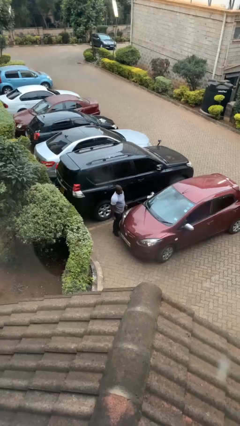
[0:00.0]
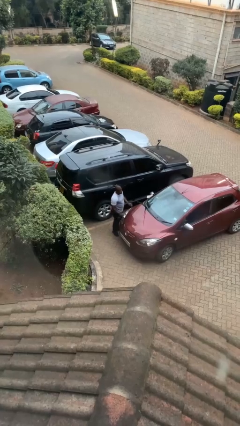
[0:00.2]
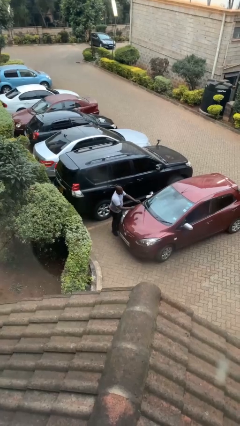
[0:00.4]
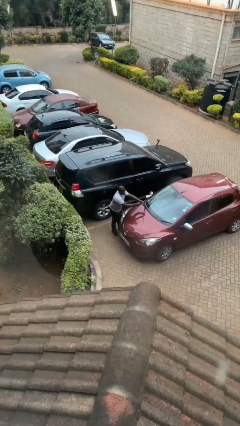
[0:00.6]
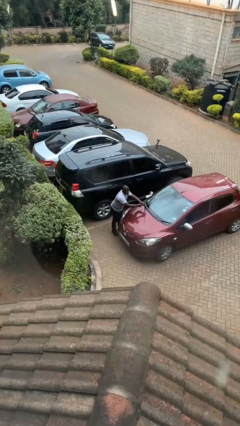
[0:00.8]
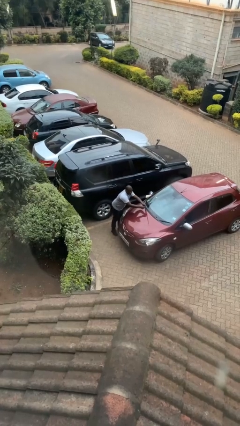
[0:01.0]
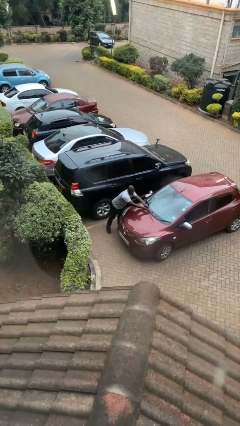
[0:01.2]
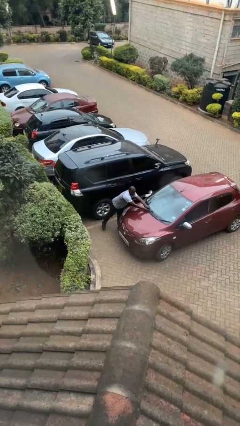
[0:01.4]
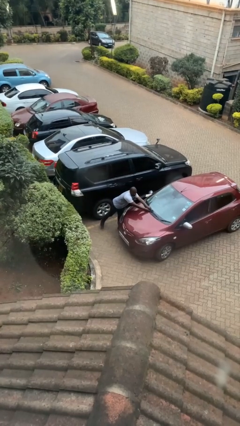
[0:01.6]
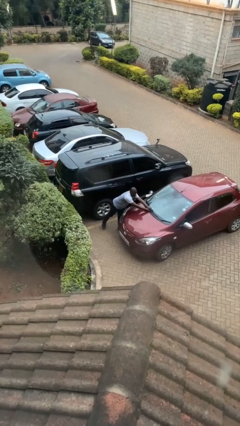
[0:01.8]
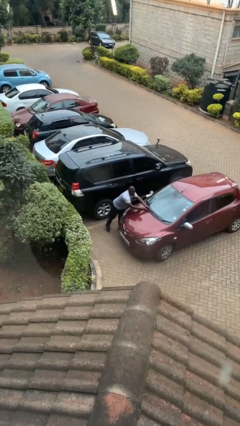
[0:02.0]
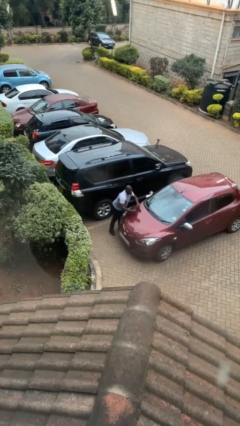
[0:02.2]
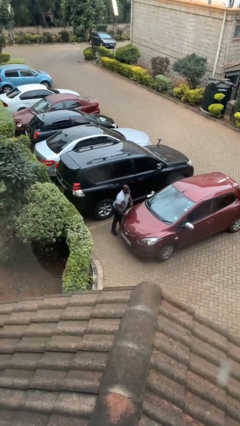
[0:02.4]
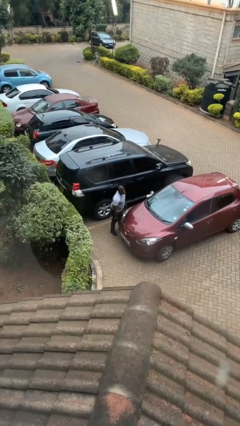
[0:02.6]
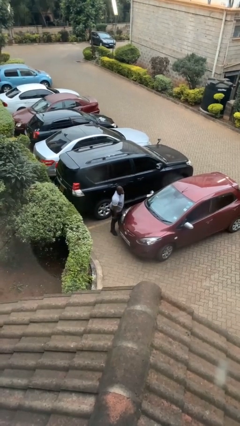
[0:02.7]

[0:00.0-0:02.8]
person flips down car wipers

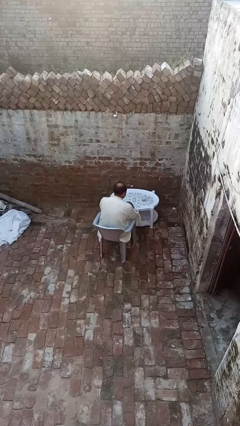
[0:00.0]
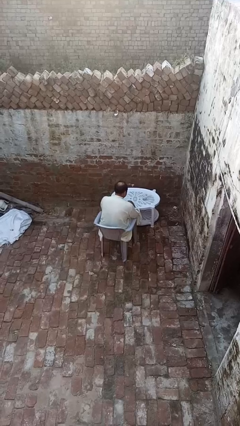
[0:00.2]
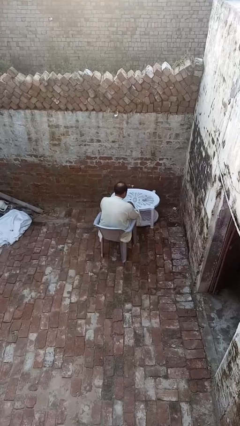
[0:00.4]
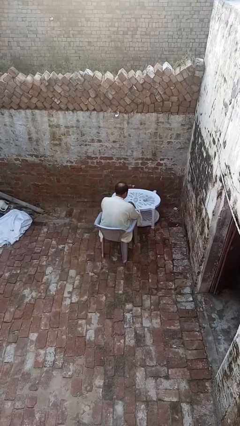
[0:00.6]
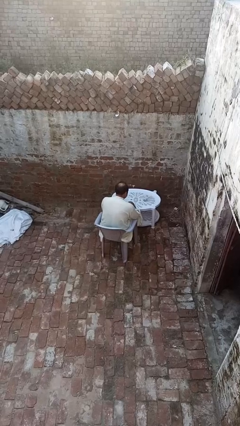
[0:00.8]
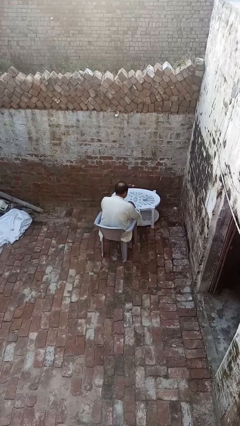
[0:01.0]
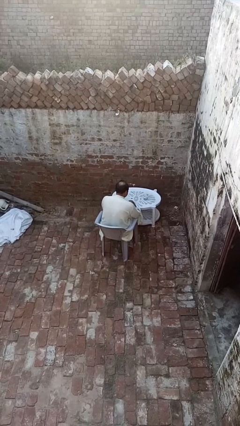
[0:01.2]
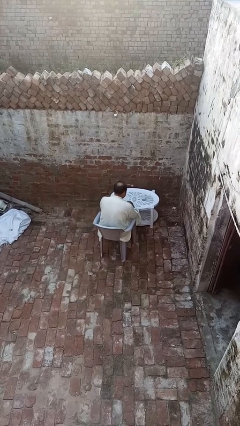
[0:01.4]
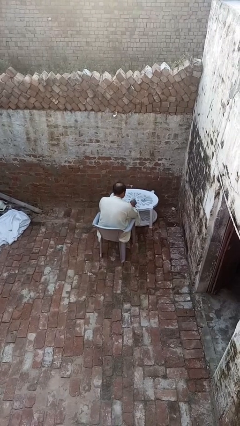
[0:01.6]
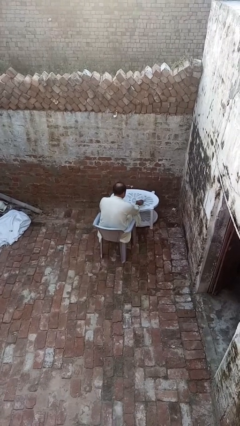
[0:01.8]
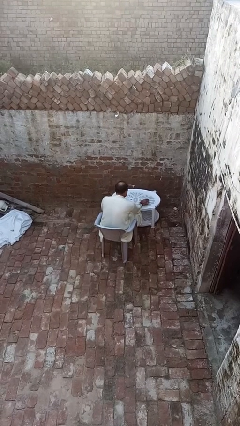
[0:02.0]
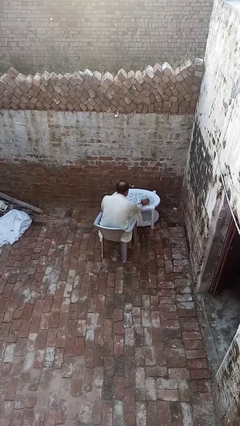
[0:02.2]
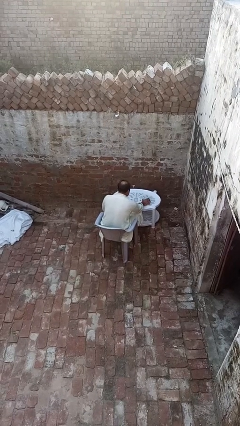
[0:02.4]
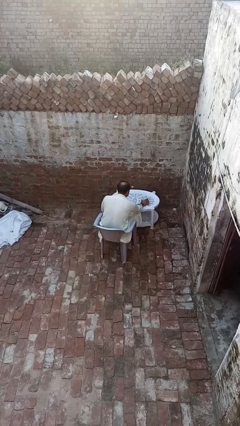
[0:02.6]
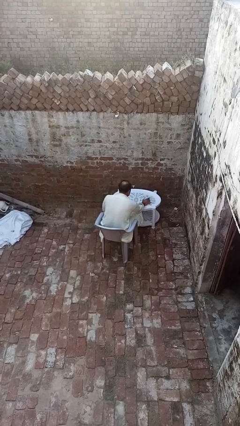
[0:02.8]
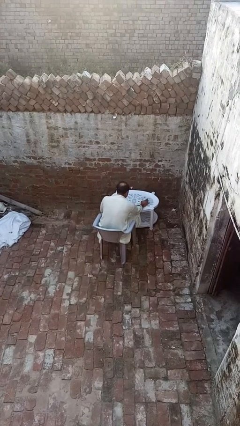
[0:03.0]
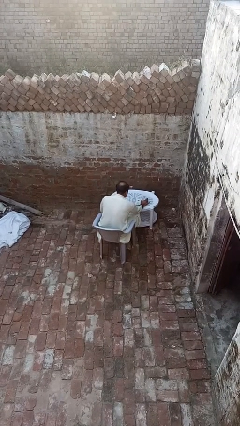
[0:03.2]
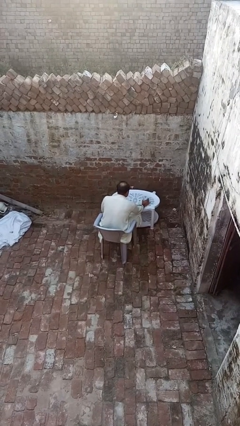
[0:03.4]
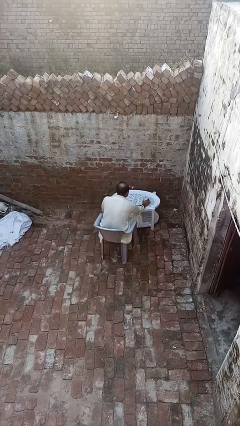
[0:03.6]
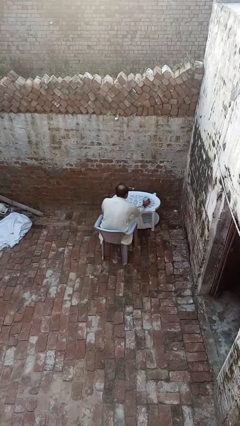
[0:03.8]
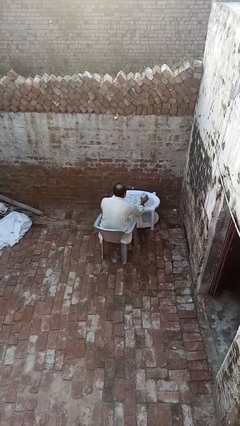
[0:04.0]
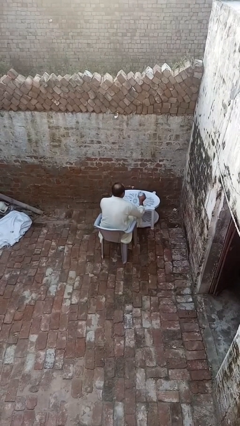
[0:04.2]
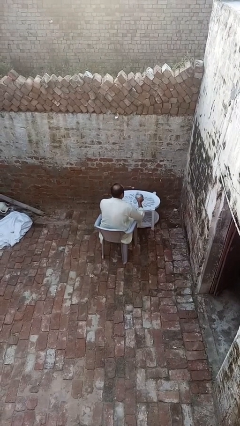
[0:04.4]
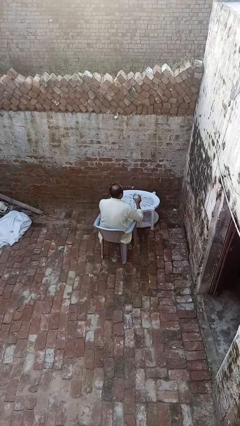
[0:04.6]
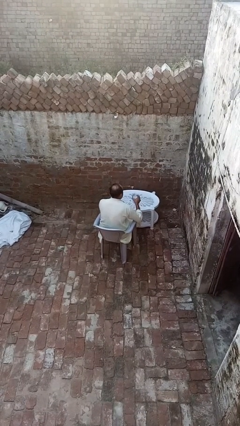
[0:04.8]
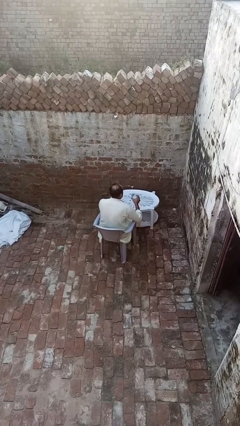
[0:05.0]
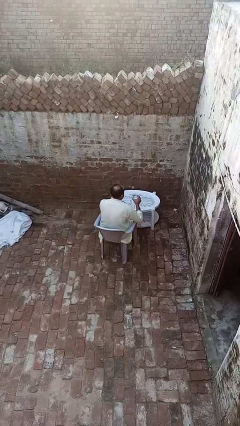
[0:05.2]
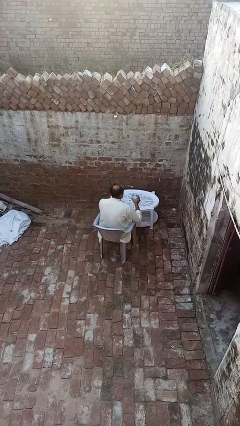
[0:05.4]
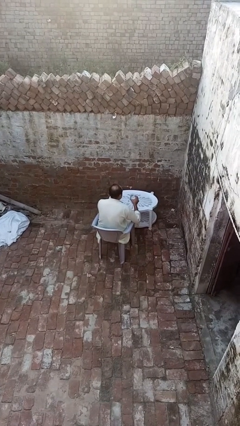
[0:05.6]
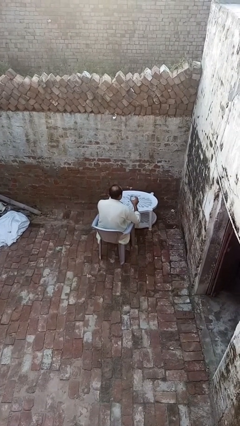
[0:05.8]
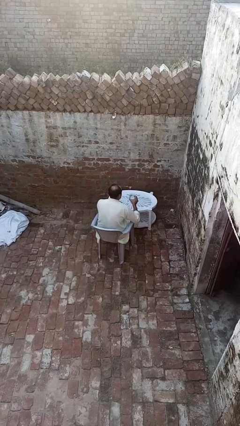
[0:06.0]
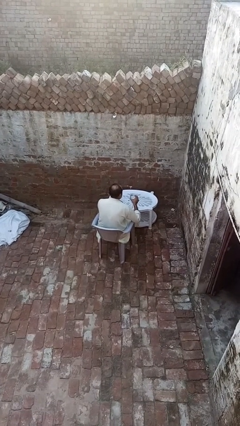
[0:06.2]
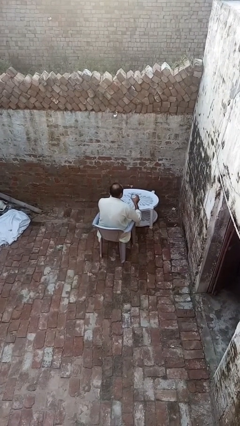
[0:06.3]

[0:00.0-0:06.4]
person picks up object from table

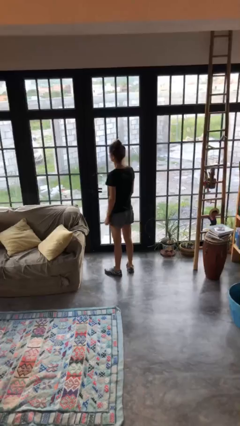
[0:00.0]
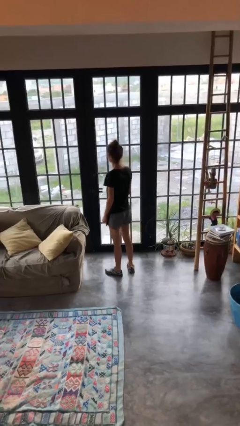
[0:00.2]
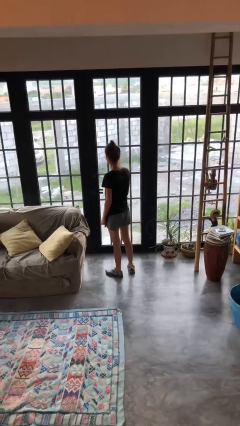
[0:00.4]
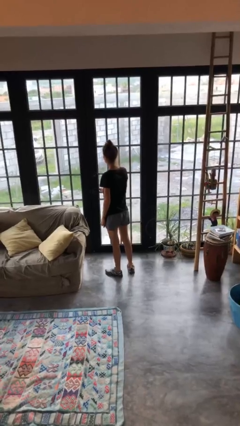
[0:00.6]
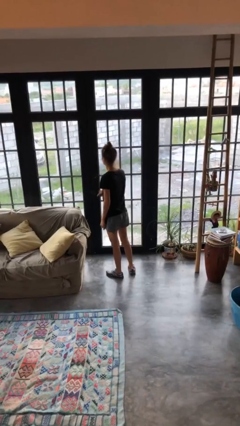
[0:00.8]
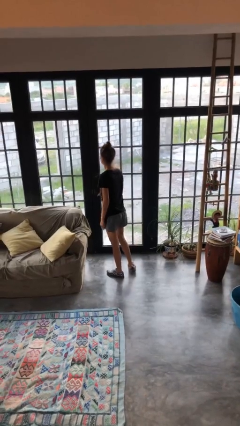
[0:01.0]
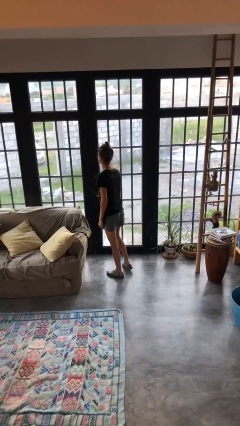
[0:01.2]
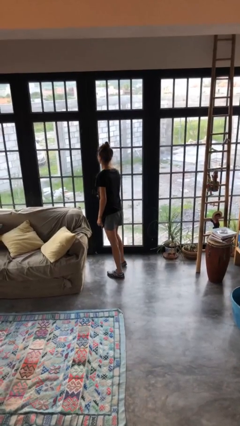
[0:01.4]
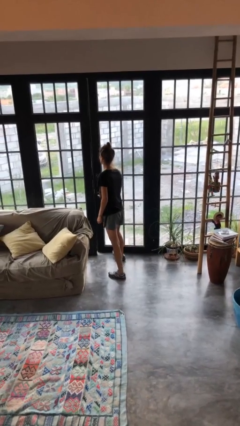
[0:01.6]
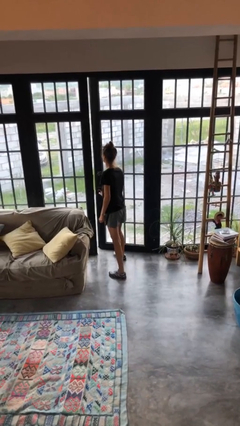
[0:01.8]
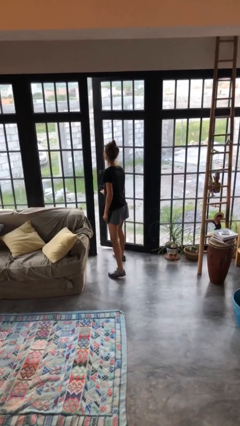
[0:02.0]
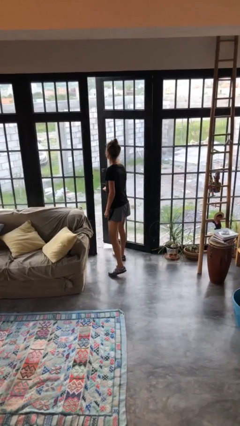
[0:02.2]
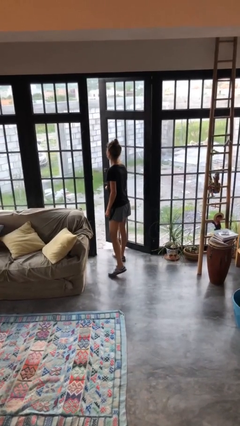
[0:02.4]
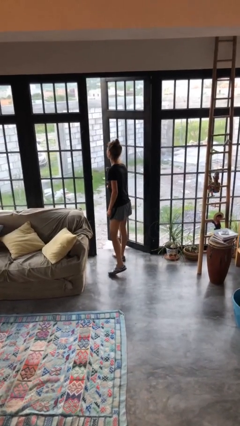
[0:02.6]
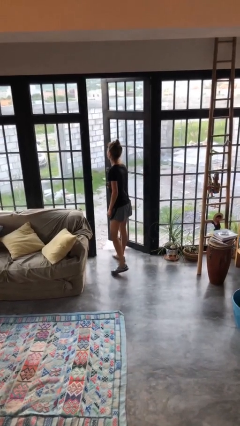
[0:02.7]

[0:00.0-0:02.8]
person opens facility door

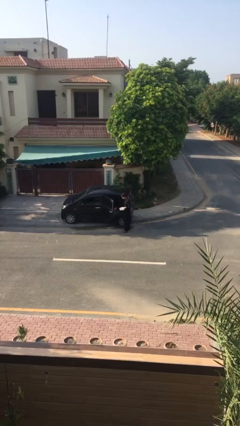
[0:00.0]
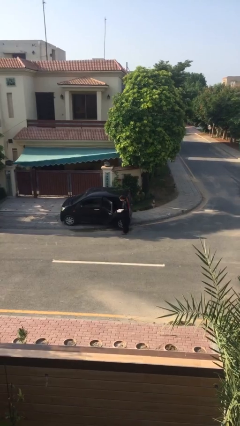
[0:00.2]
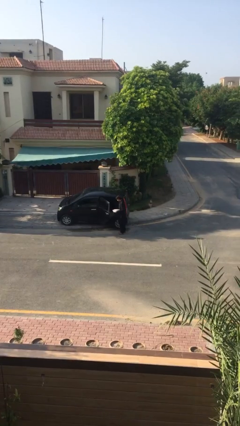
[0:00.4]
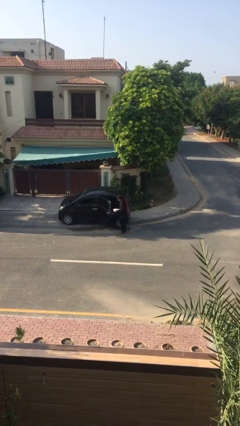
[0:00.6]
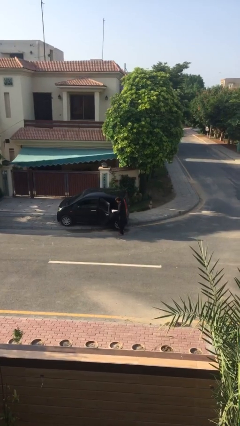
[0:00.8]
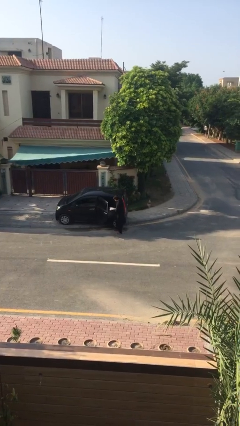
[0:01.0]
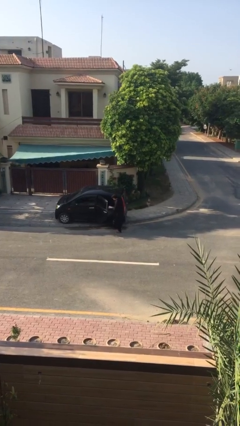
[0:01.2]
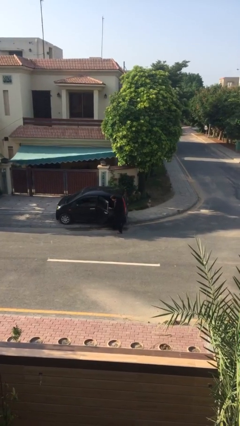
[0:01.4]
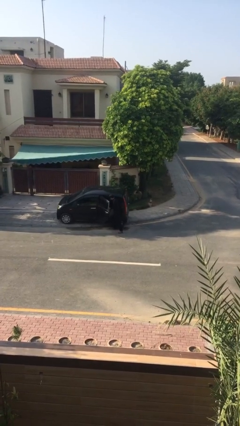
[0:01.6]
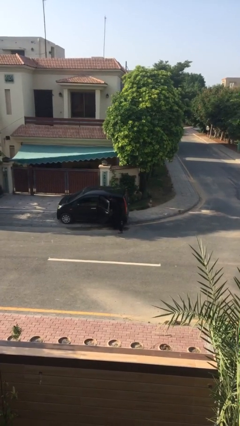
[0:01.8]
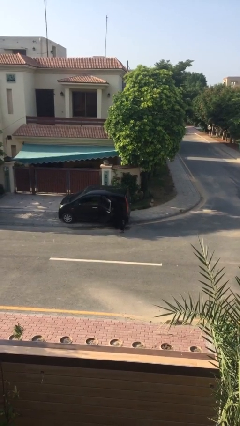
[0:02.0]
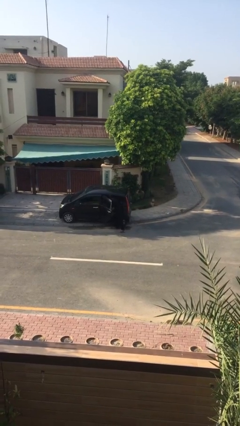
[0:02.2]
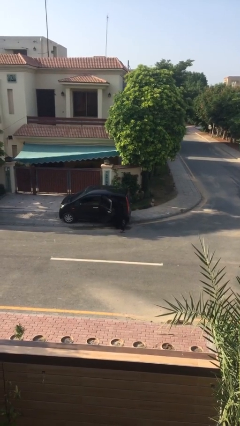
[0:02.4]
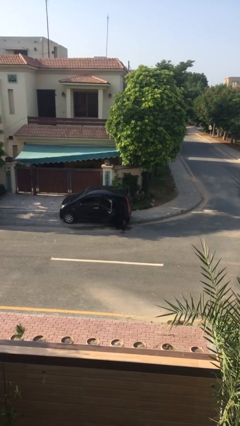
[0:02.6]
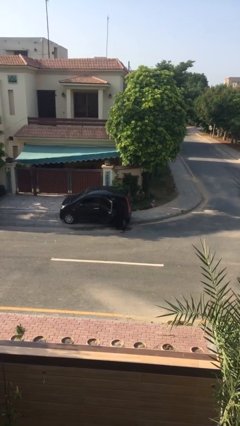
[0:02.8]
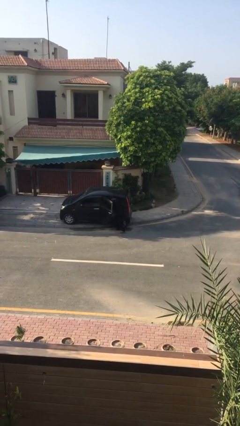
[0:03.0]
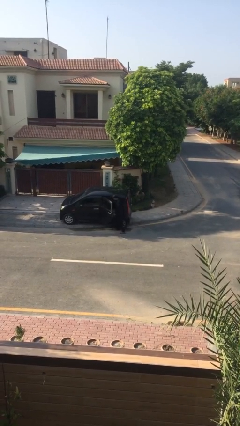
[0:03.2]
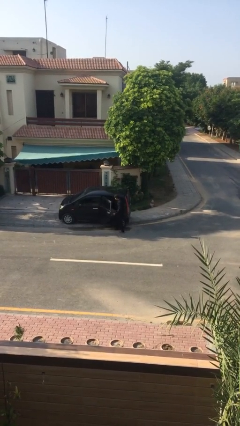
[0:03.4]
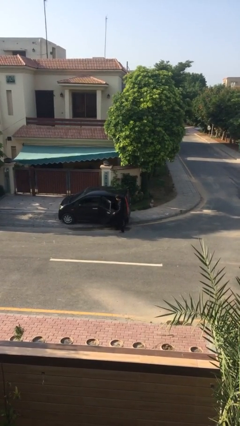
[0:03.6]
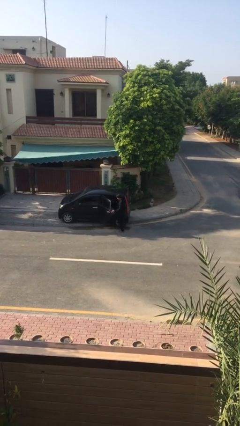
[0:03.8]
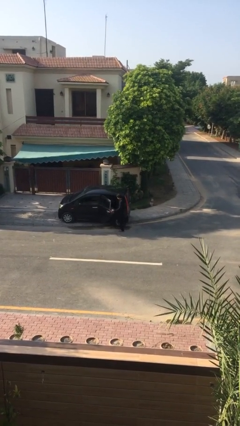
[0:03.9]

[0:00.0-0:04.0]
person loads car

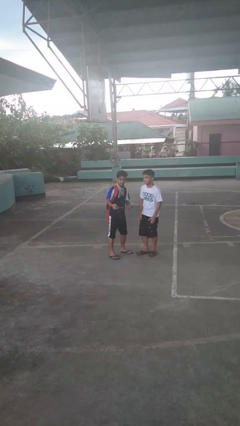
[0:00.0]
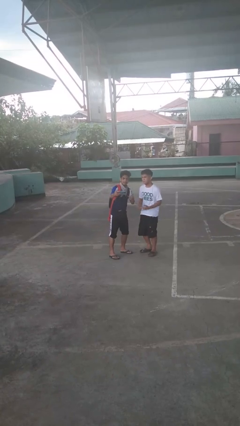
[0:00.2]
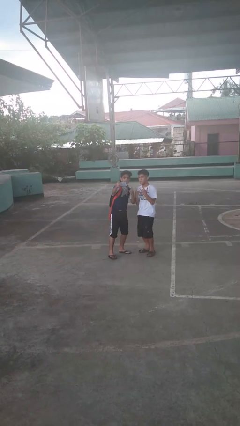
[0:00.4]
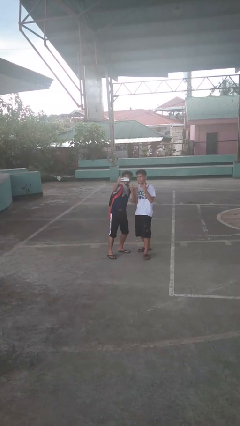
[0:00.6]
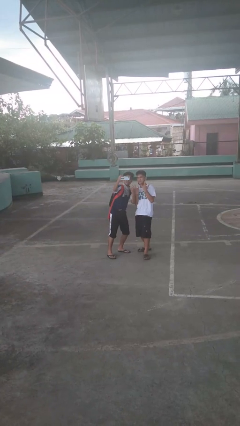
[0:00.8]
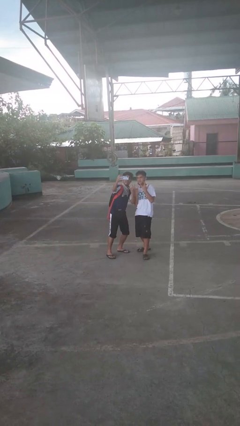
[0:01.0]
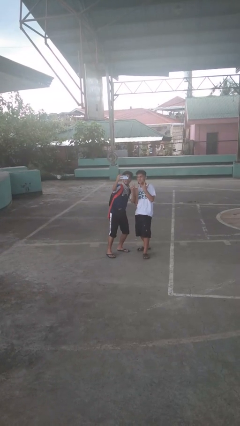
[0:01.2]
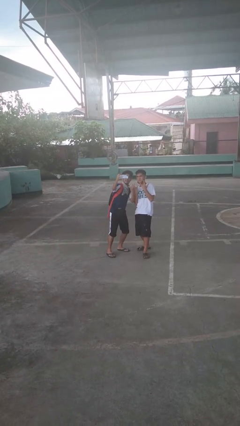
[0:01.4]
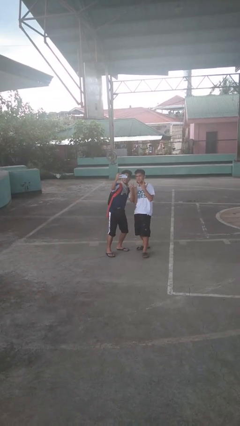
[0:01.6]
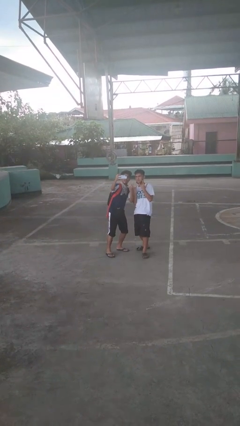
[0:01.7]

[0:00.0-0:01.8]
person takes selfie with person

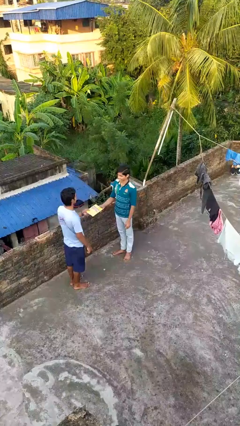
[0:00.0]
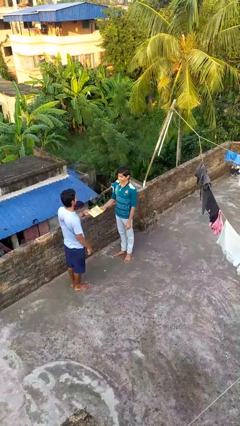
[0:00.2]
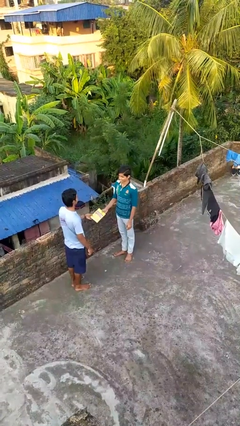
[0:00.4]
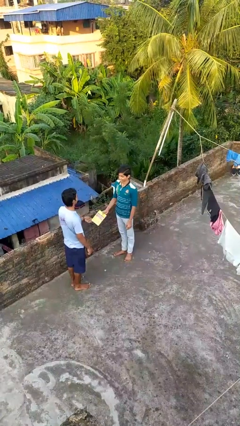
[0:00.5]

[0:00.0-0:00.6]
person transfers object to person
